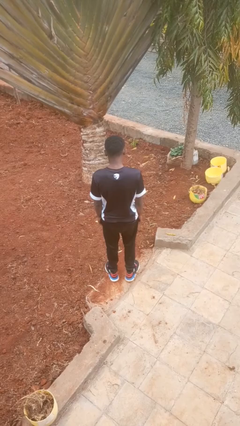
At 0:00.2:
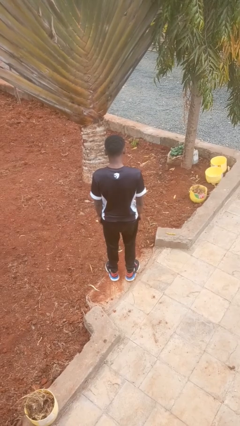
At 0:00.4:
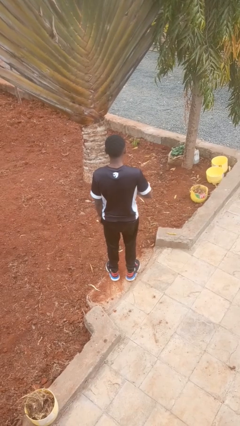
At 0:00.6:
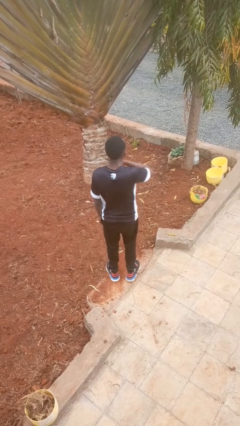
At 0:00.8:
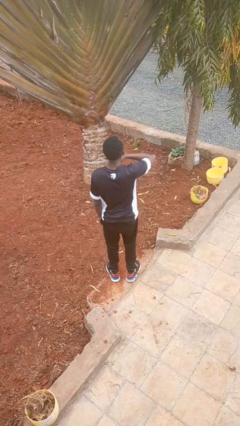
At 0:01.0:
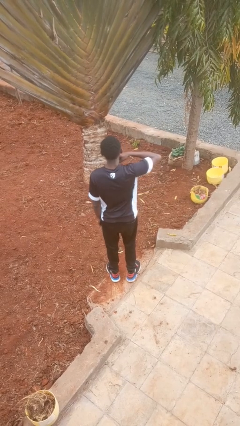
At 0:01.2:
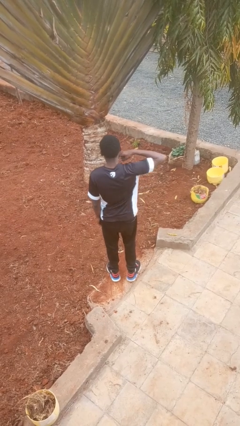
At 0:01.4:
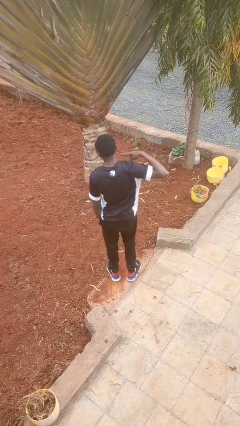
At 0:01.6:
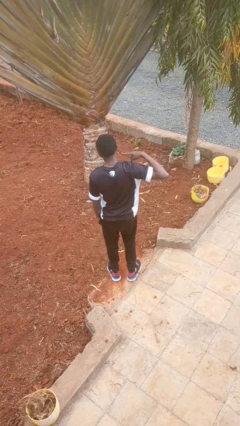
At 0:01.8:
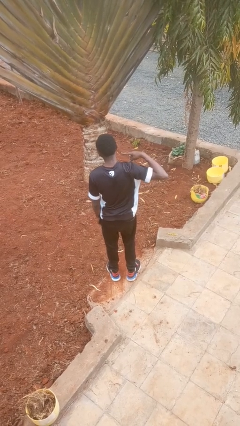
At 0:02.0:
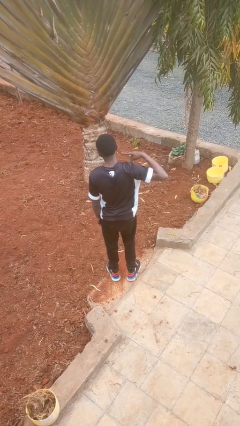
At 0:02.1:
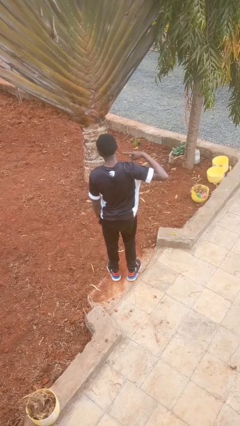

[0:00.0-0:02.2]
person gestures cut

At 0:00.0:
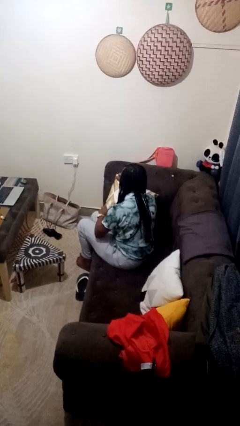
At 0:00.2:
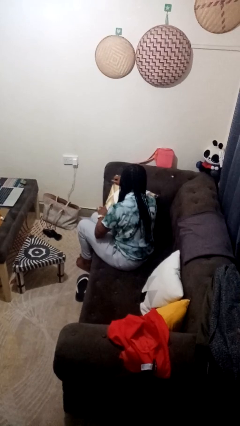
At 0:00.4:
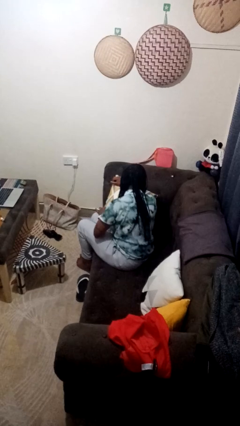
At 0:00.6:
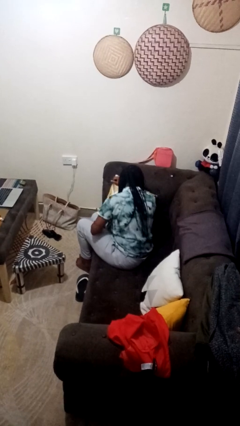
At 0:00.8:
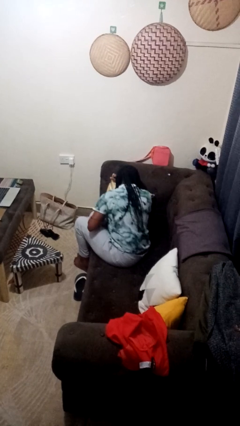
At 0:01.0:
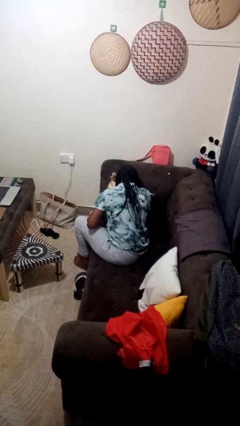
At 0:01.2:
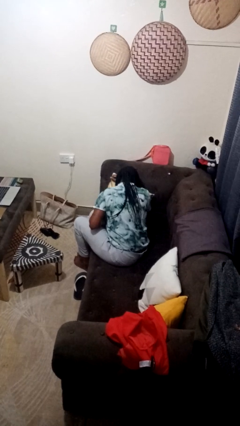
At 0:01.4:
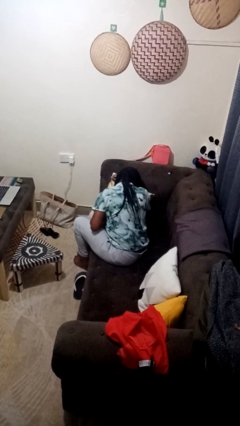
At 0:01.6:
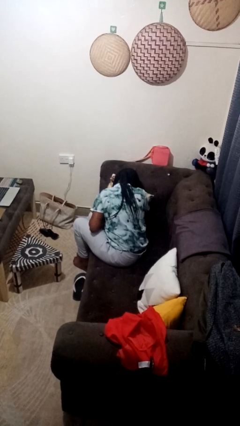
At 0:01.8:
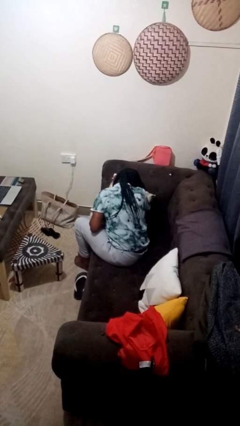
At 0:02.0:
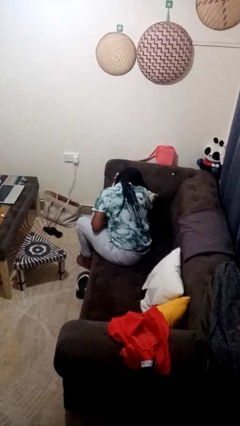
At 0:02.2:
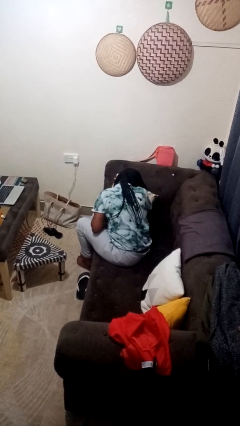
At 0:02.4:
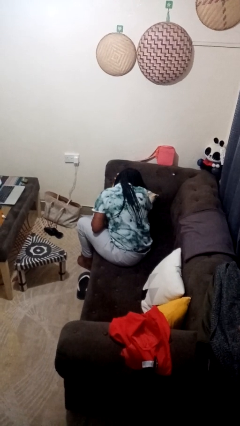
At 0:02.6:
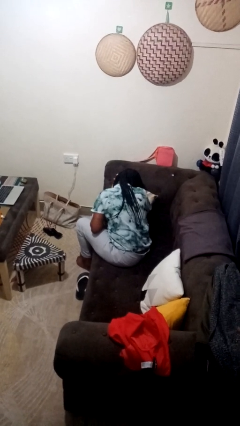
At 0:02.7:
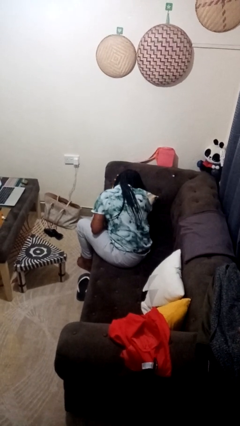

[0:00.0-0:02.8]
person lies down on couch

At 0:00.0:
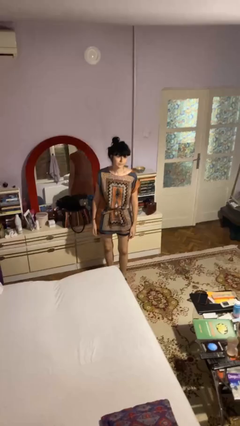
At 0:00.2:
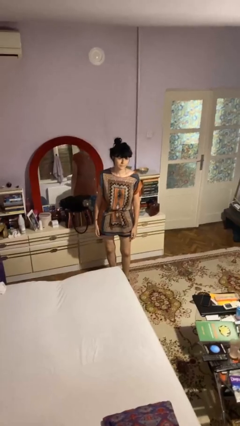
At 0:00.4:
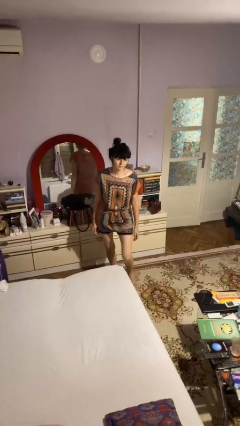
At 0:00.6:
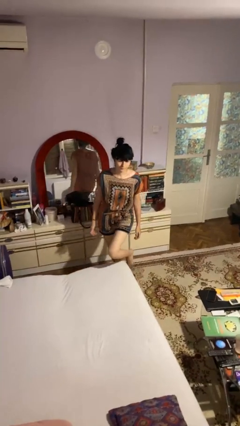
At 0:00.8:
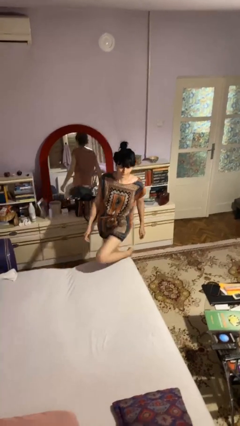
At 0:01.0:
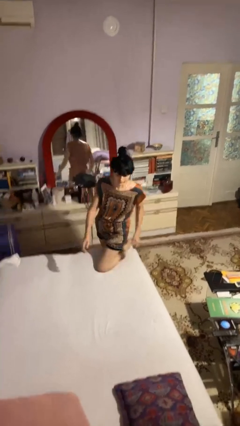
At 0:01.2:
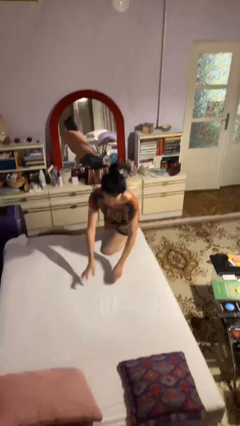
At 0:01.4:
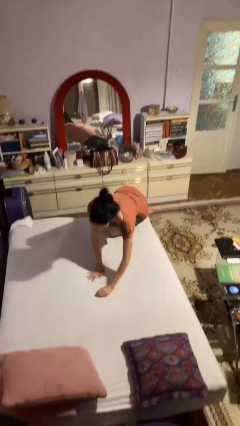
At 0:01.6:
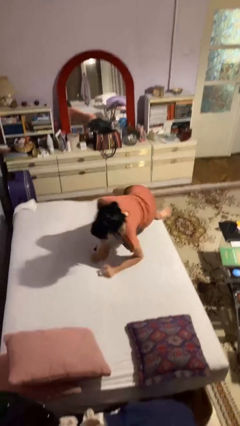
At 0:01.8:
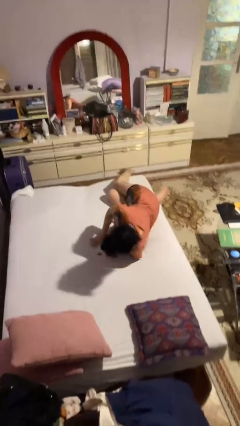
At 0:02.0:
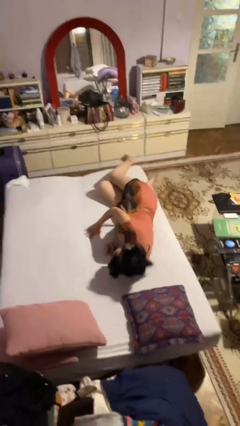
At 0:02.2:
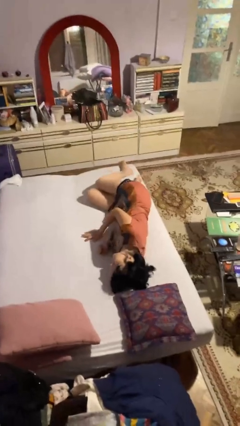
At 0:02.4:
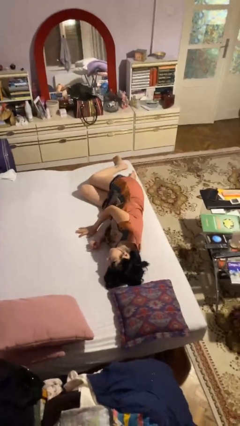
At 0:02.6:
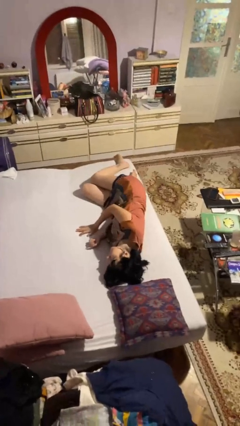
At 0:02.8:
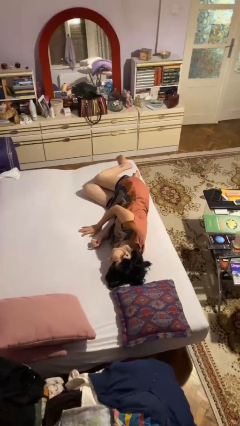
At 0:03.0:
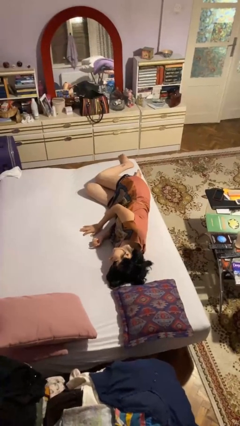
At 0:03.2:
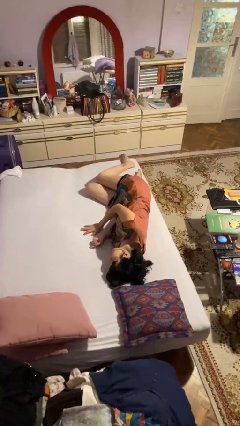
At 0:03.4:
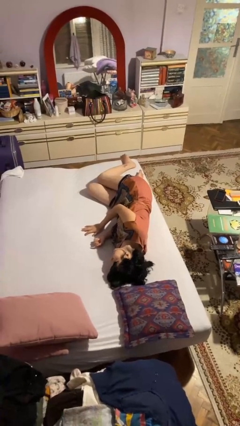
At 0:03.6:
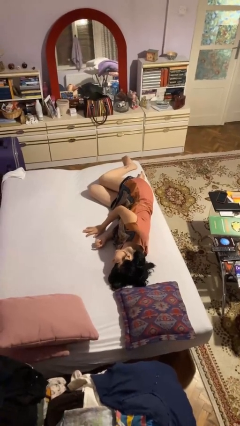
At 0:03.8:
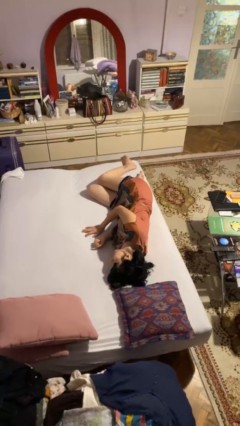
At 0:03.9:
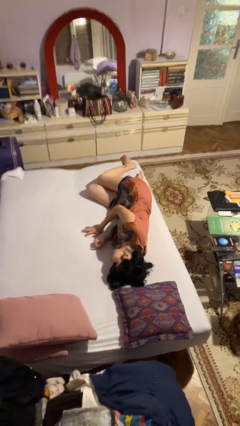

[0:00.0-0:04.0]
person lies down on bed

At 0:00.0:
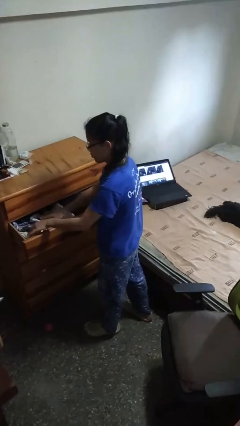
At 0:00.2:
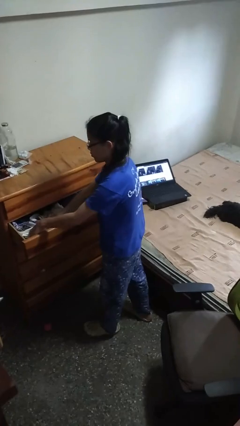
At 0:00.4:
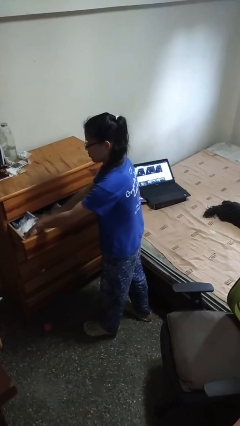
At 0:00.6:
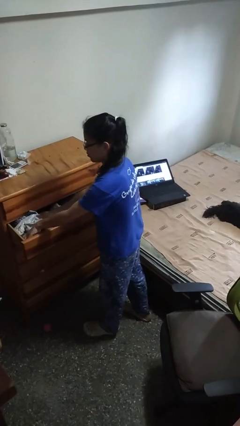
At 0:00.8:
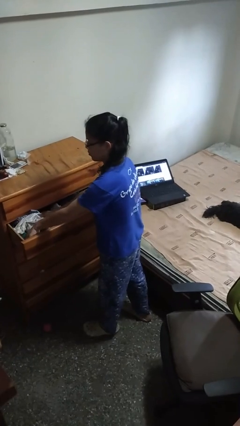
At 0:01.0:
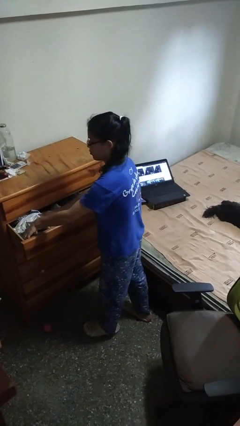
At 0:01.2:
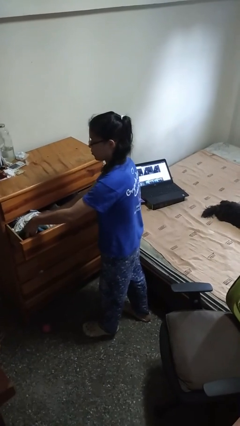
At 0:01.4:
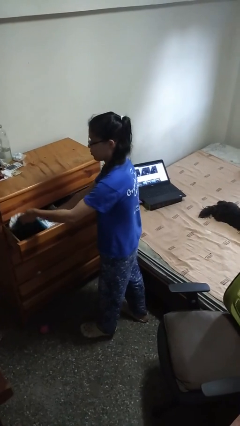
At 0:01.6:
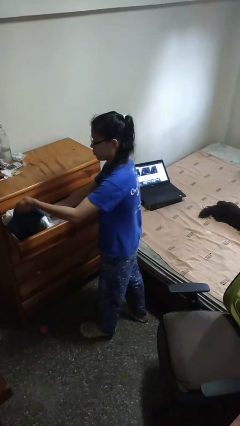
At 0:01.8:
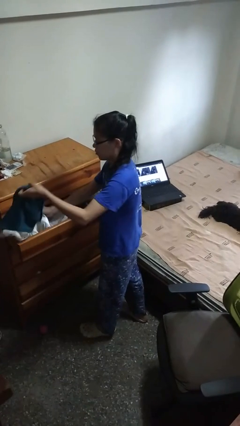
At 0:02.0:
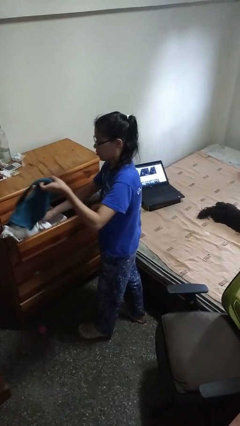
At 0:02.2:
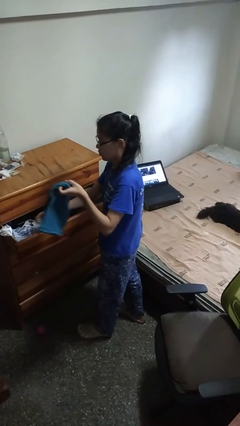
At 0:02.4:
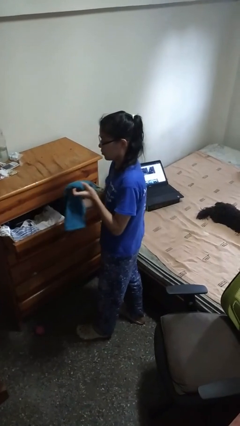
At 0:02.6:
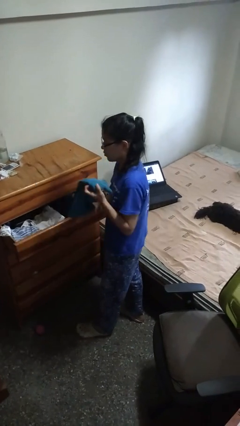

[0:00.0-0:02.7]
person takes clothes from dresser

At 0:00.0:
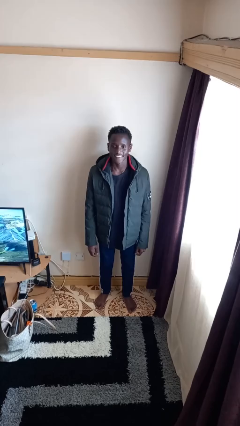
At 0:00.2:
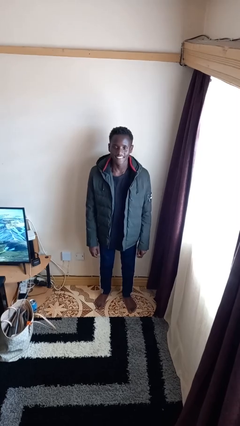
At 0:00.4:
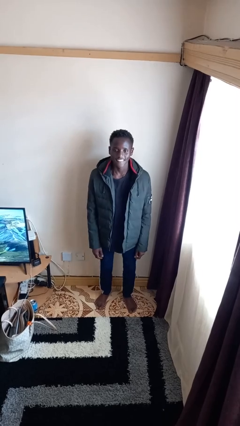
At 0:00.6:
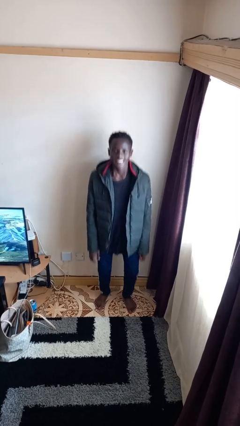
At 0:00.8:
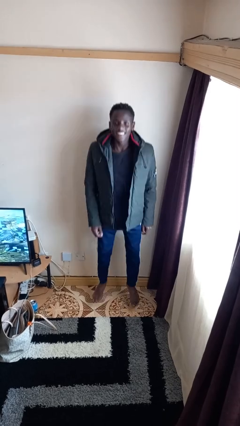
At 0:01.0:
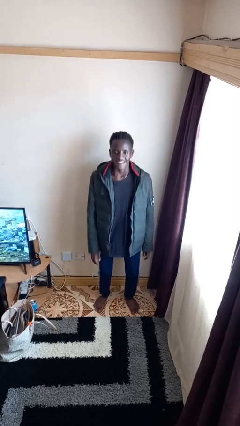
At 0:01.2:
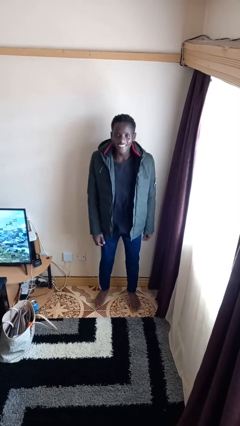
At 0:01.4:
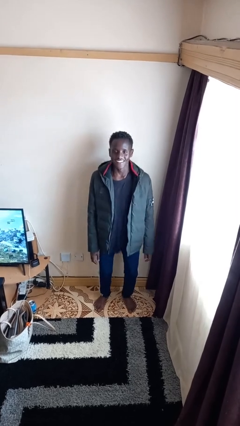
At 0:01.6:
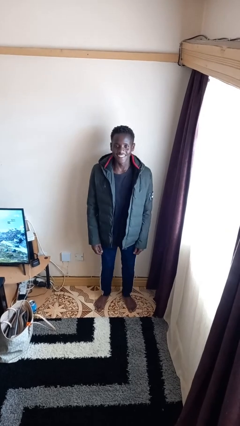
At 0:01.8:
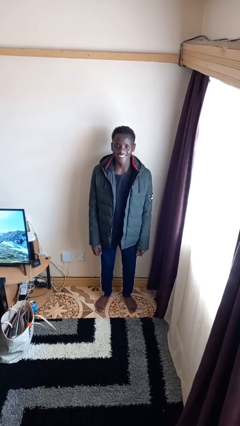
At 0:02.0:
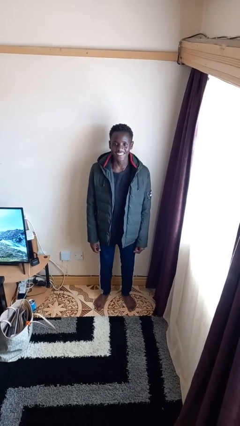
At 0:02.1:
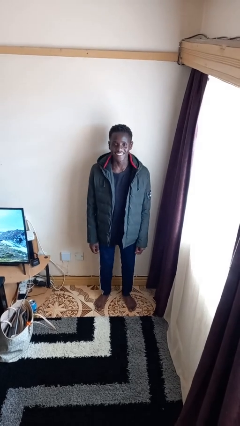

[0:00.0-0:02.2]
person jumps

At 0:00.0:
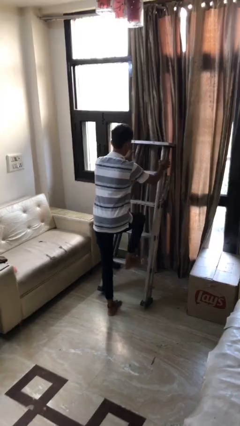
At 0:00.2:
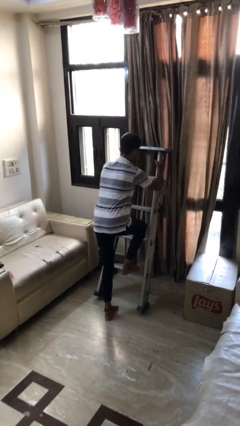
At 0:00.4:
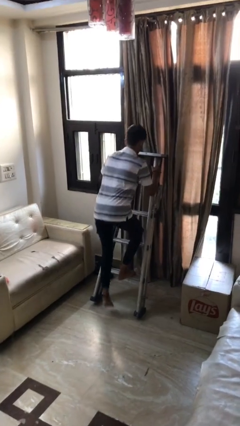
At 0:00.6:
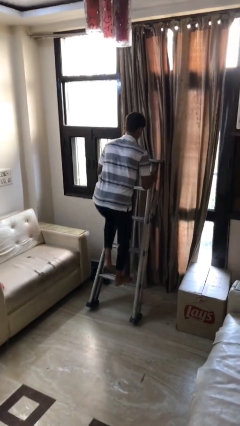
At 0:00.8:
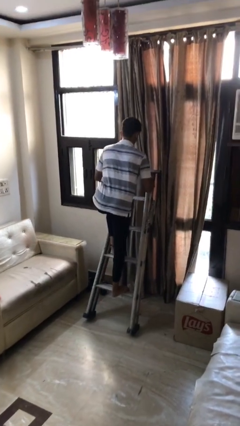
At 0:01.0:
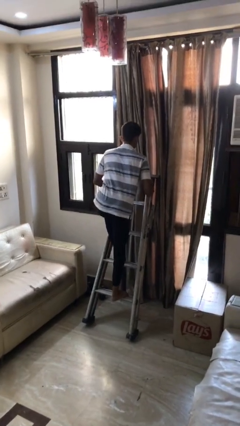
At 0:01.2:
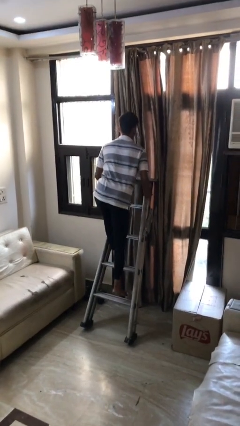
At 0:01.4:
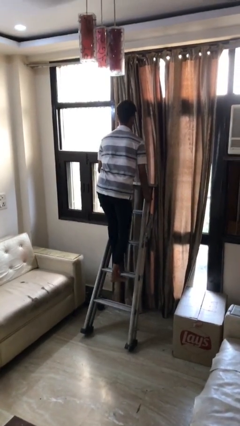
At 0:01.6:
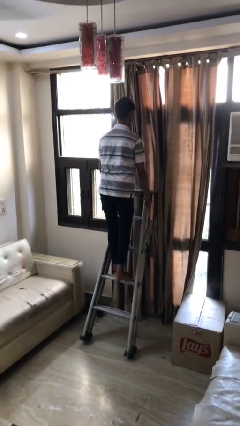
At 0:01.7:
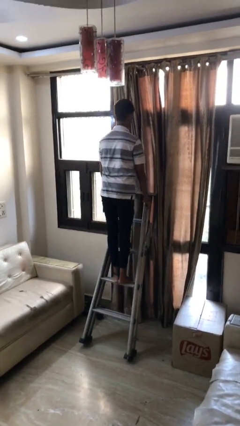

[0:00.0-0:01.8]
person climbs up ladder

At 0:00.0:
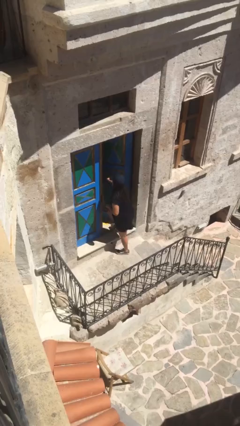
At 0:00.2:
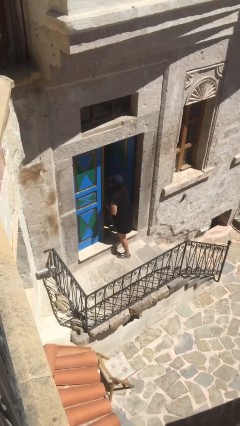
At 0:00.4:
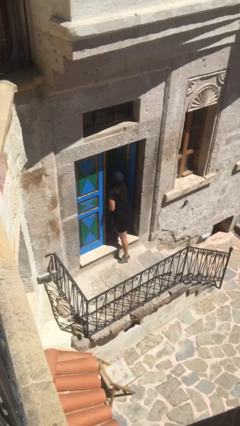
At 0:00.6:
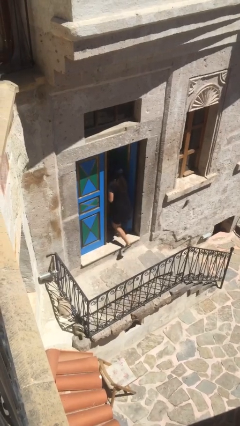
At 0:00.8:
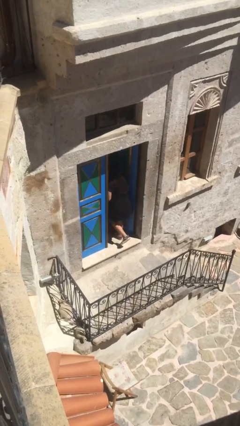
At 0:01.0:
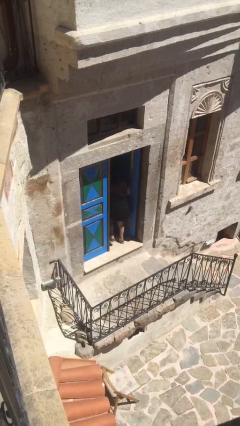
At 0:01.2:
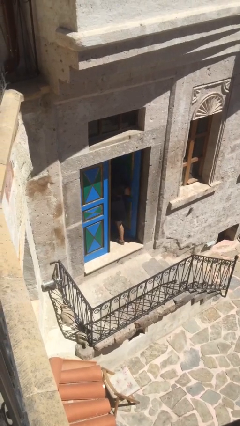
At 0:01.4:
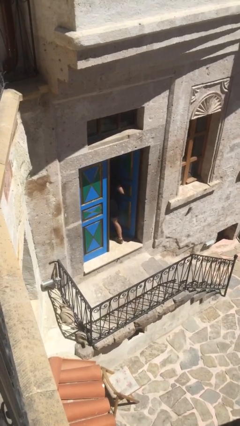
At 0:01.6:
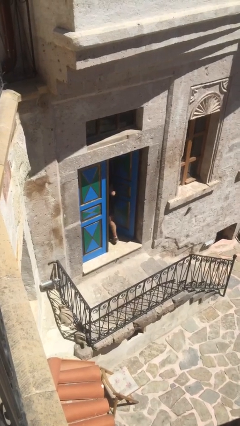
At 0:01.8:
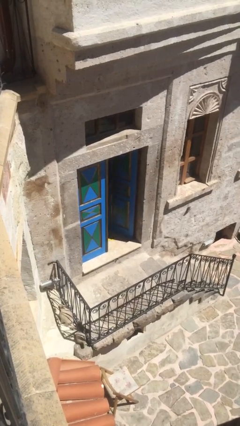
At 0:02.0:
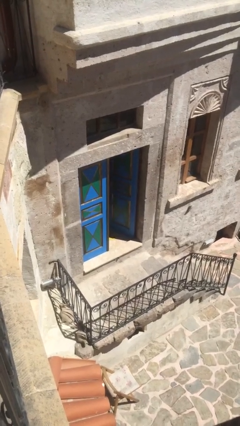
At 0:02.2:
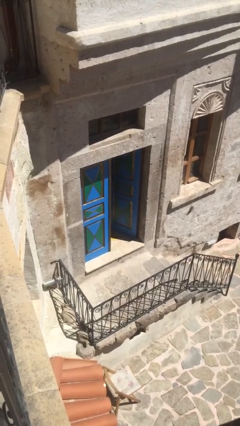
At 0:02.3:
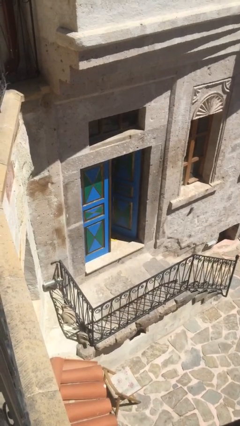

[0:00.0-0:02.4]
person exits scene through structure
